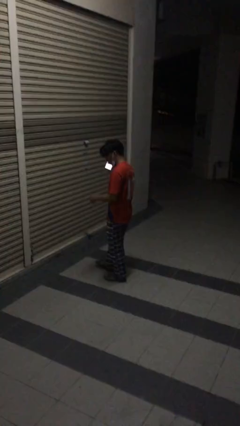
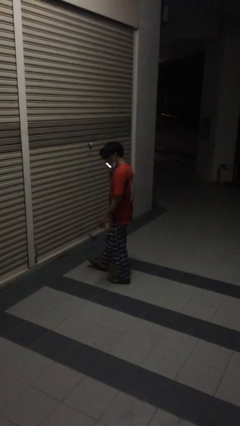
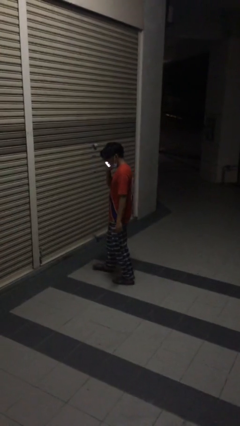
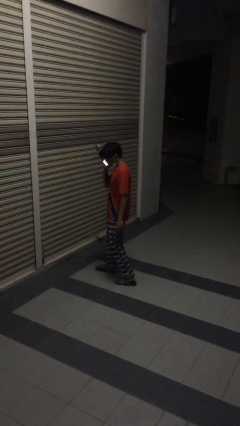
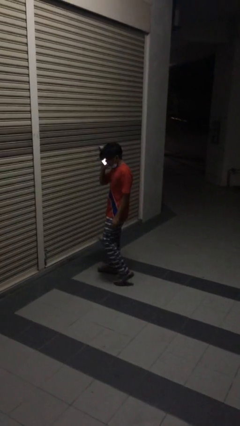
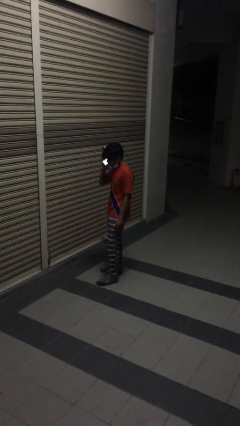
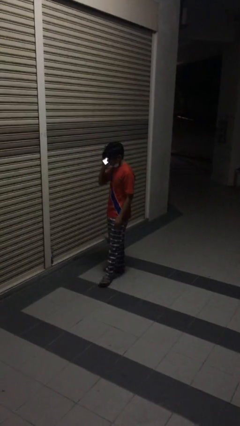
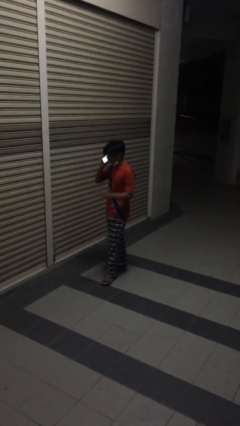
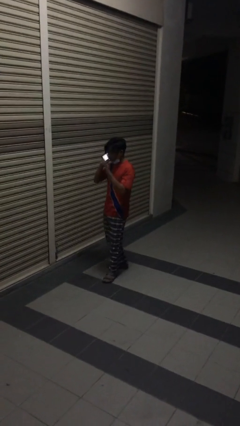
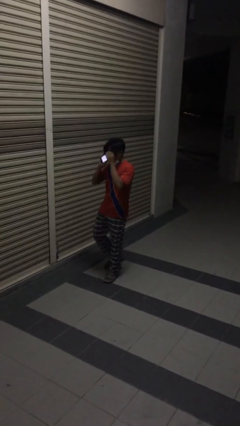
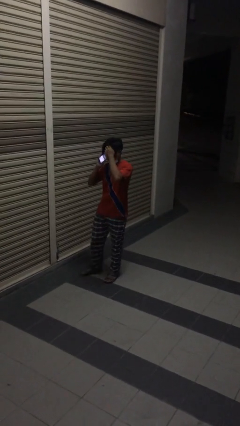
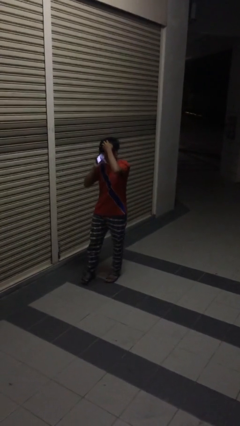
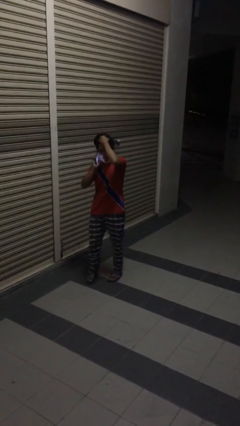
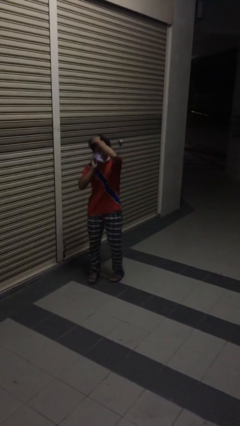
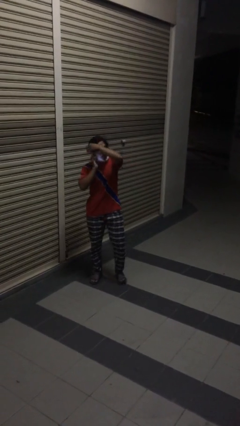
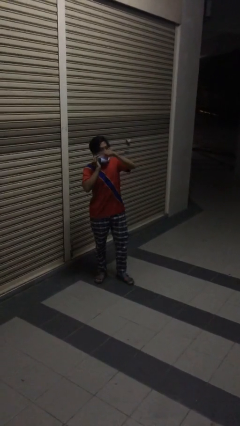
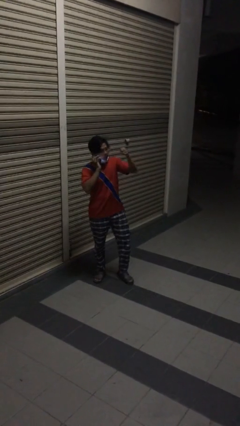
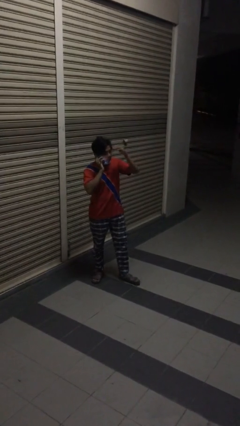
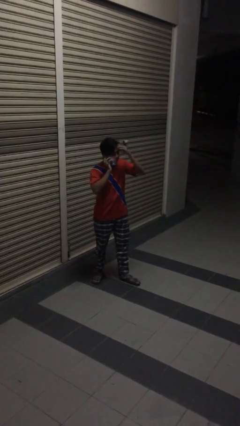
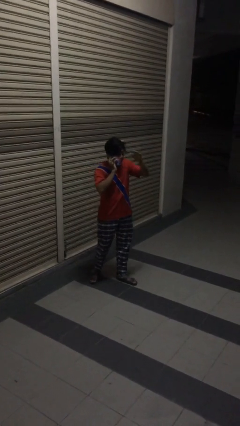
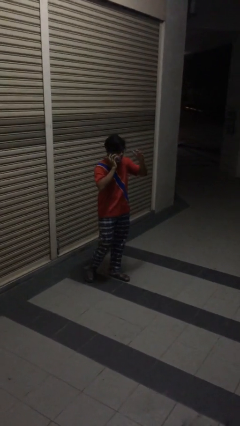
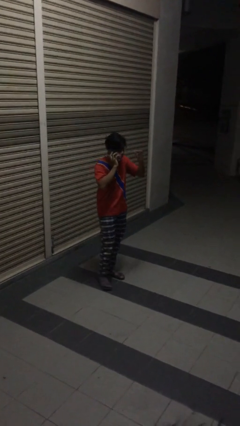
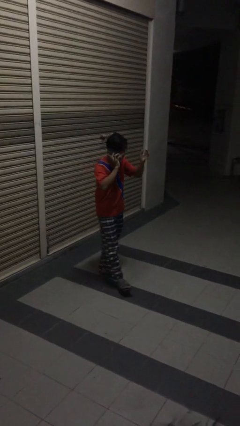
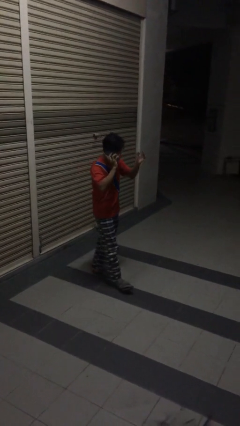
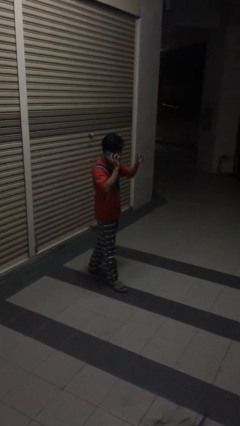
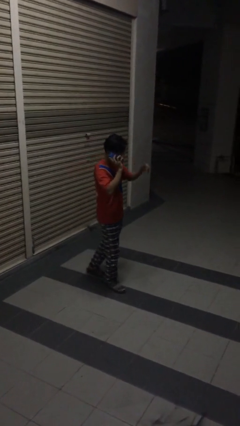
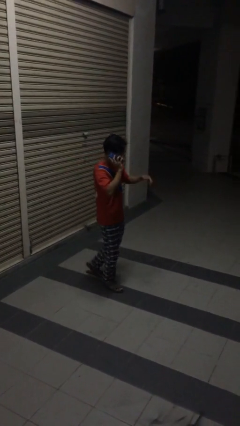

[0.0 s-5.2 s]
person talks on phone

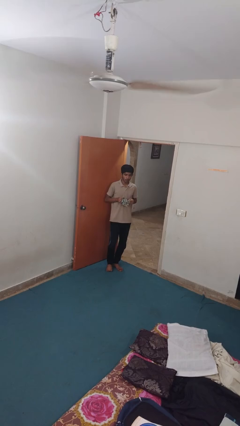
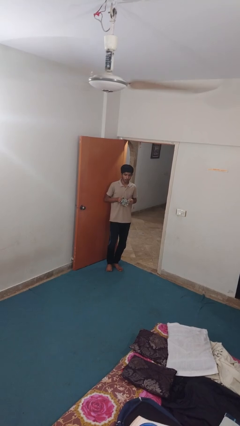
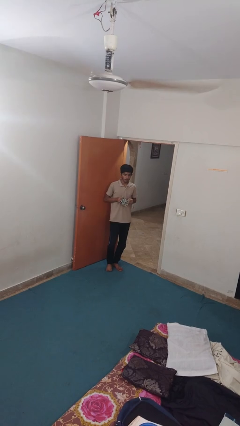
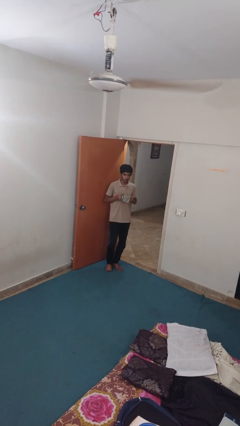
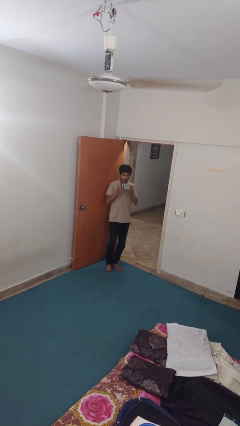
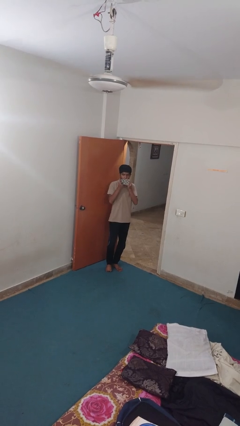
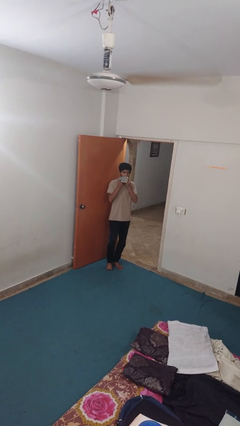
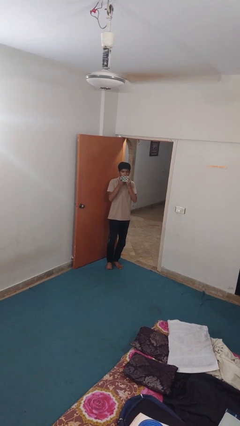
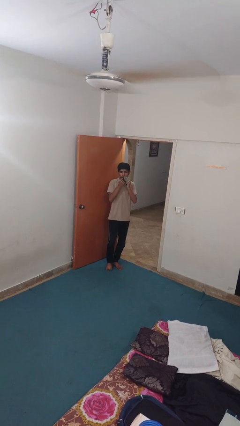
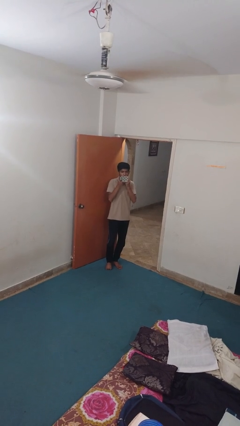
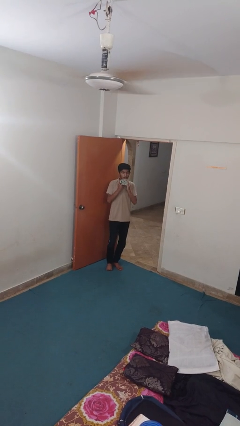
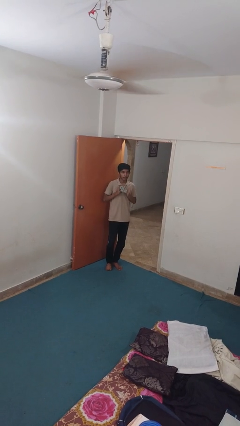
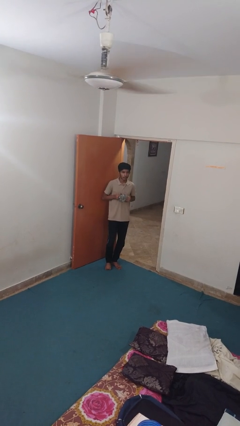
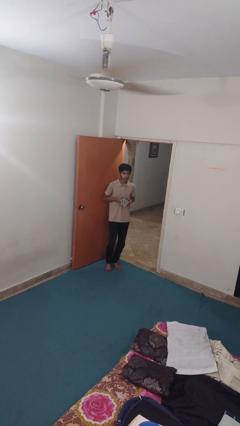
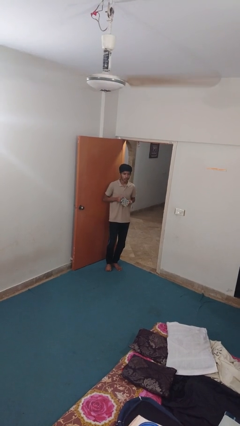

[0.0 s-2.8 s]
person wipes mouth with napkin

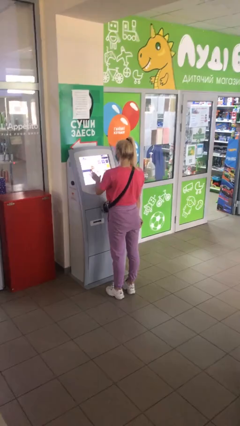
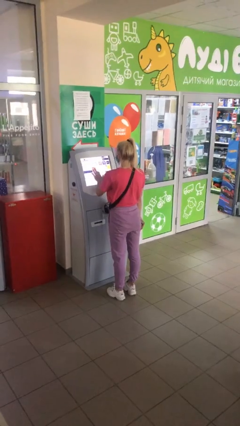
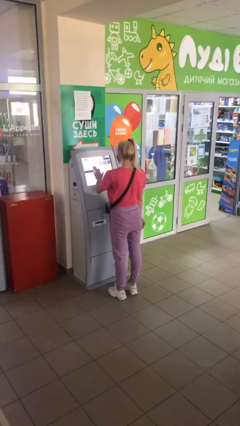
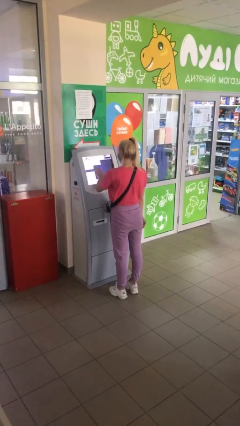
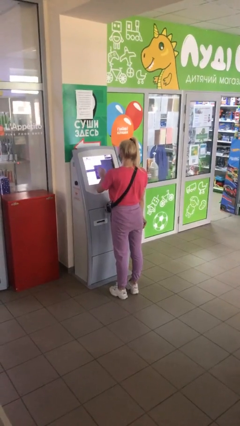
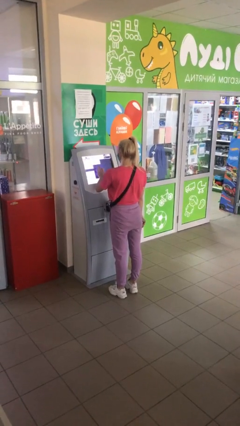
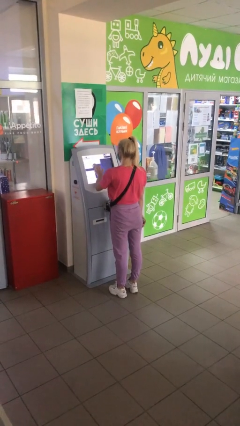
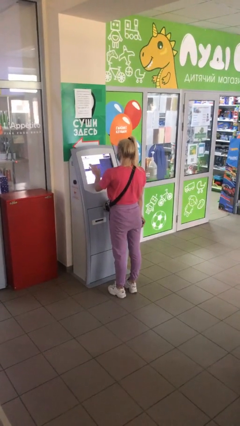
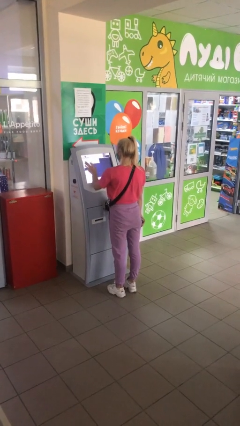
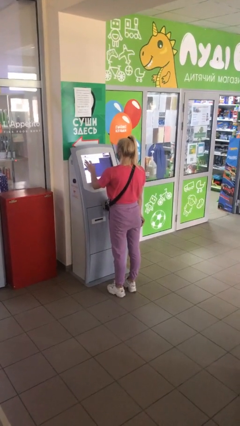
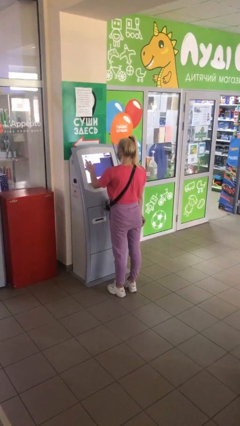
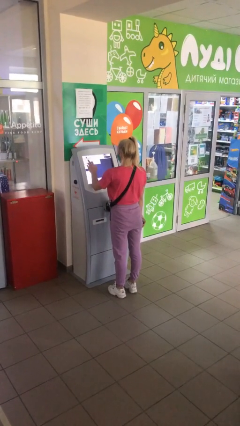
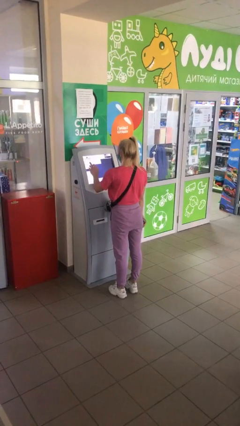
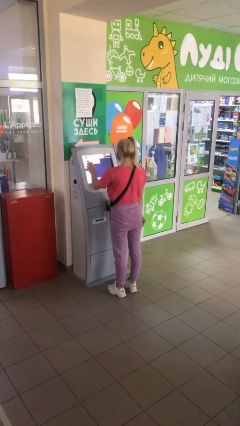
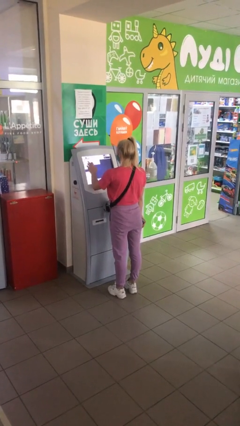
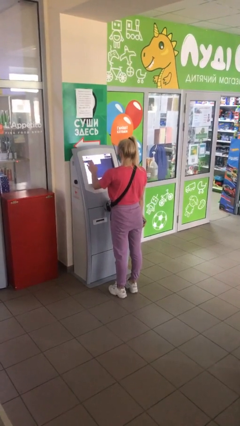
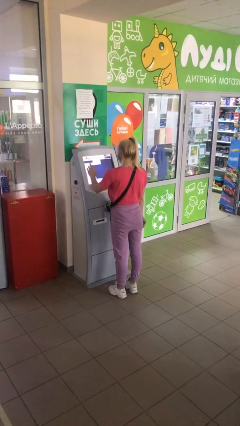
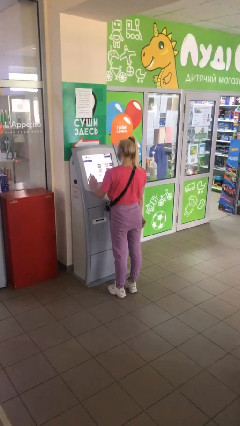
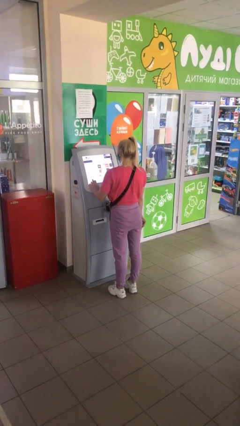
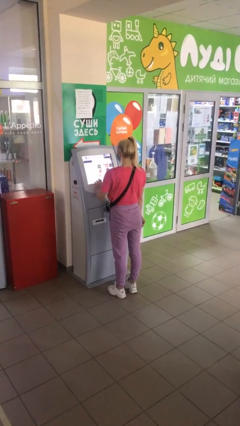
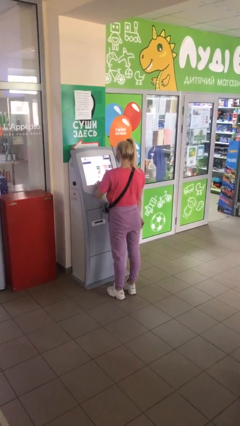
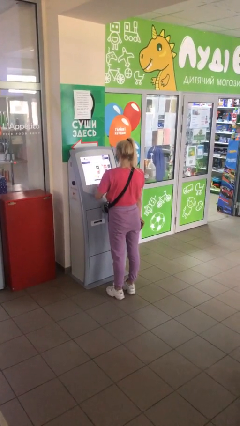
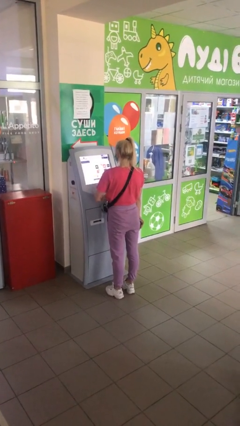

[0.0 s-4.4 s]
person purchases from machine

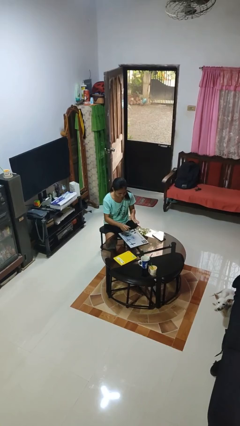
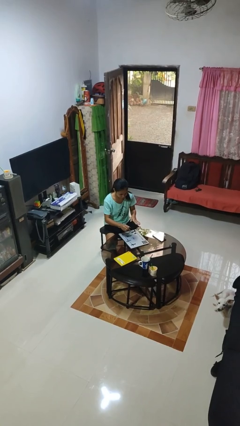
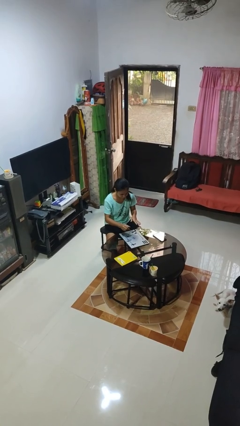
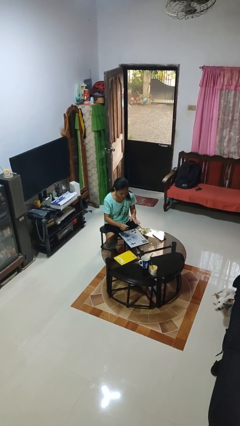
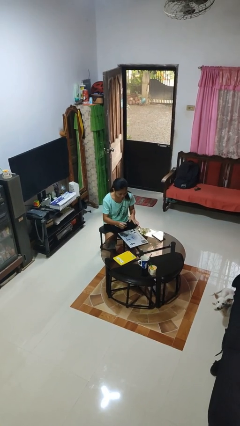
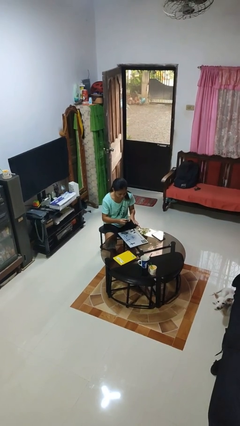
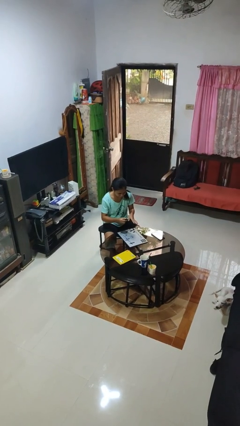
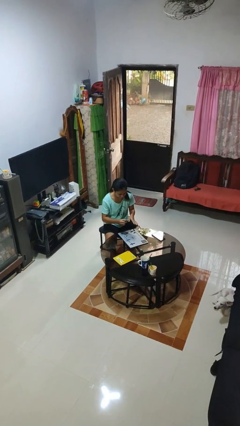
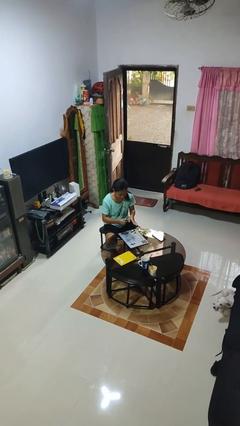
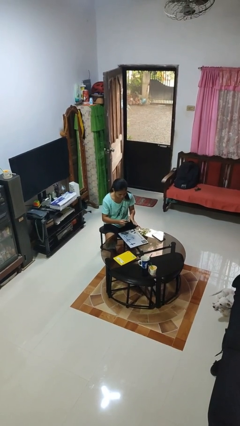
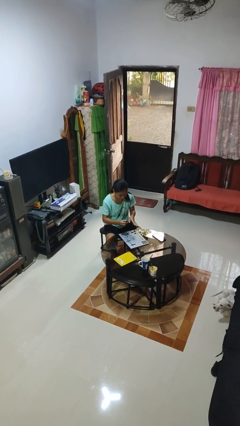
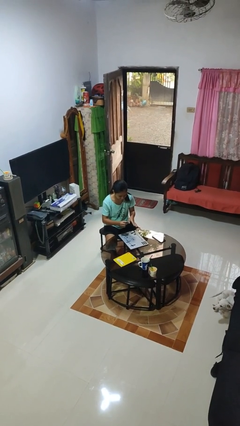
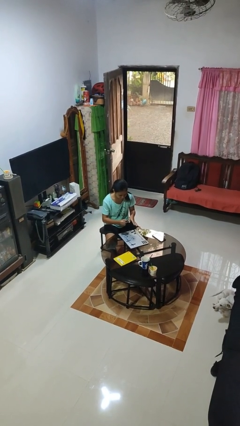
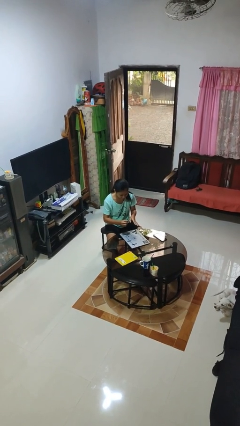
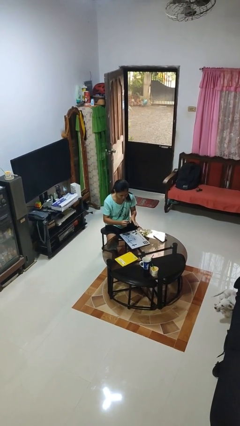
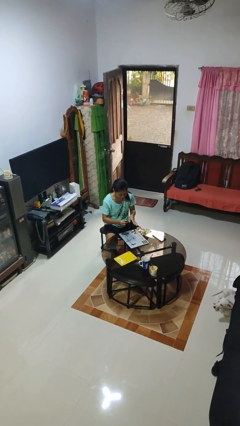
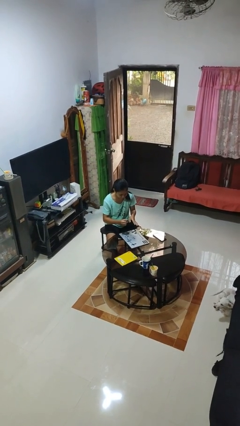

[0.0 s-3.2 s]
person paints fingernails

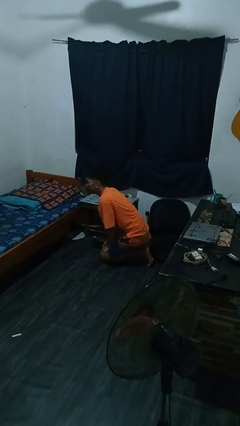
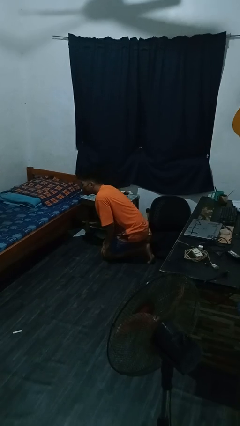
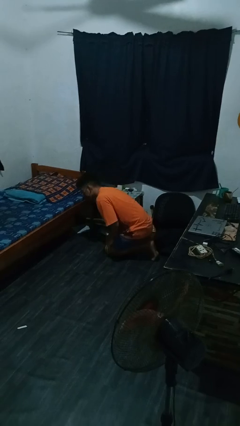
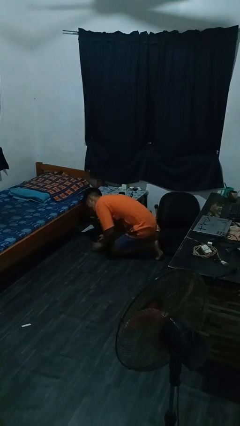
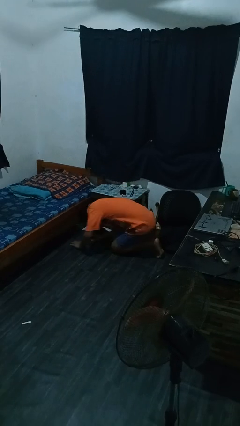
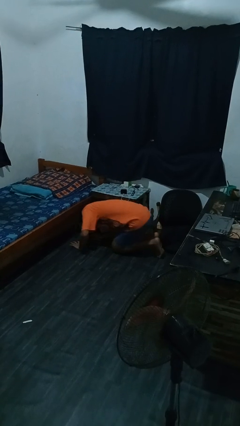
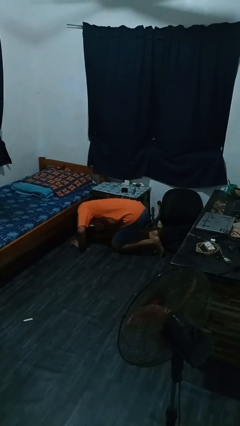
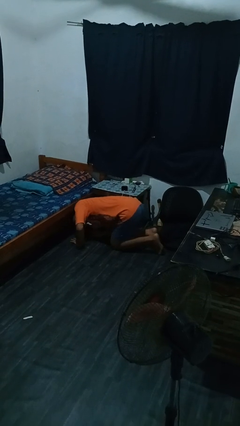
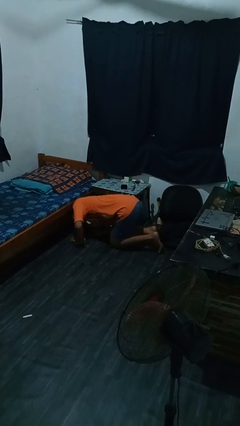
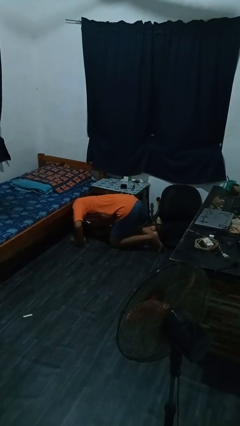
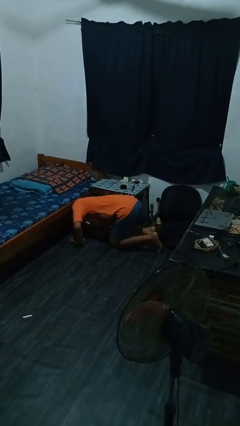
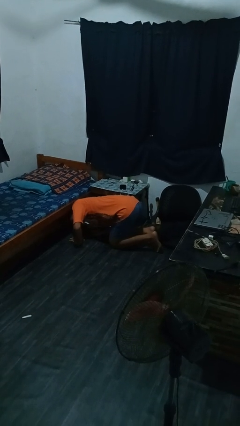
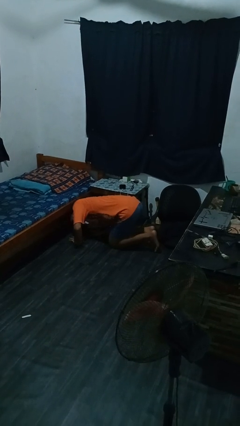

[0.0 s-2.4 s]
person searches under bed
